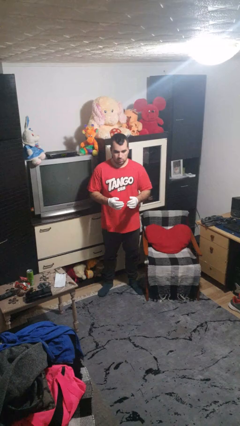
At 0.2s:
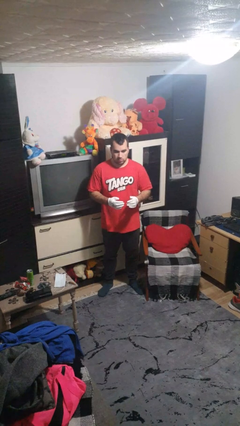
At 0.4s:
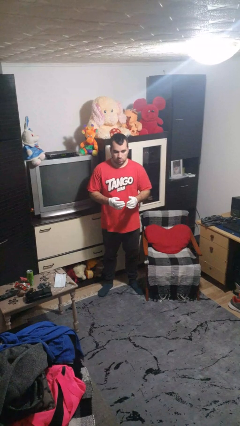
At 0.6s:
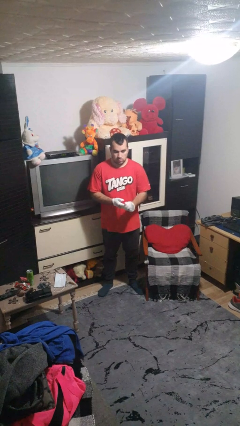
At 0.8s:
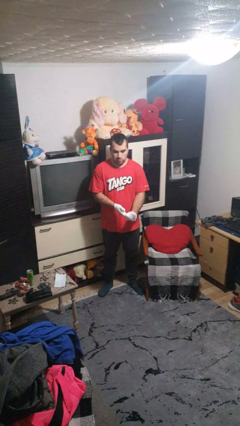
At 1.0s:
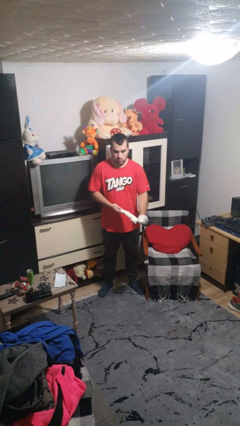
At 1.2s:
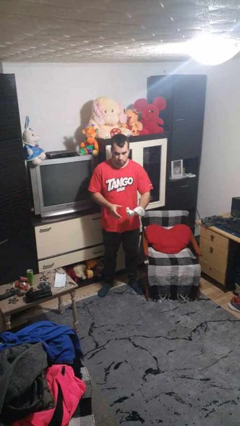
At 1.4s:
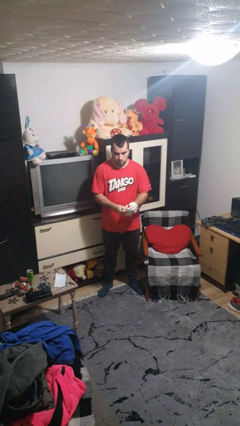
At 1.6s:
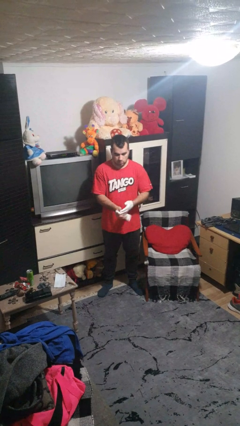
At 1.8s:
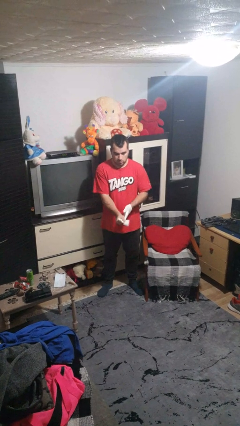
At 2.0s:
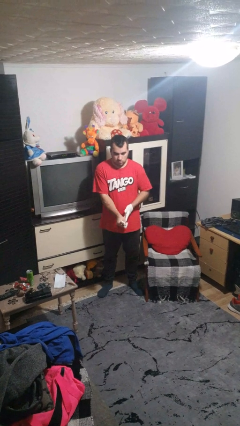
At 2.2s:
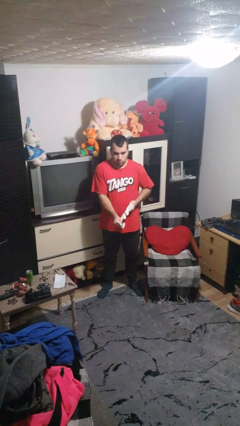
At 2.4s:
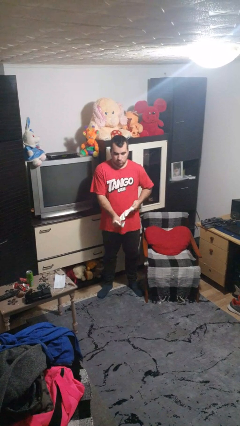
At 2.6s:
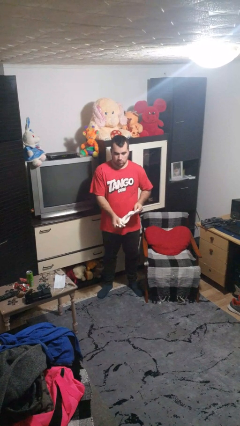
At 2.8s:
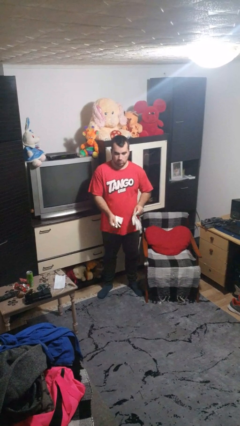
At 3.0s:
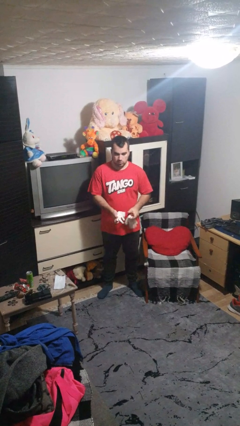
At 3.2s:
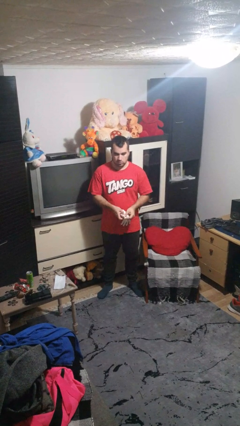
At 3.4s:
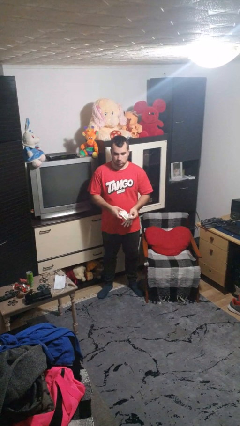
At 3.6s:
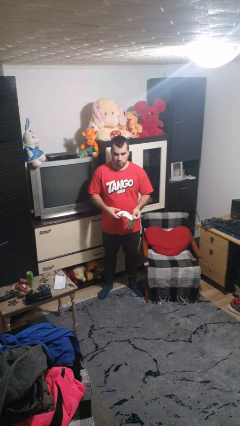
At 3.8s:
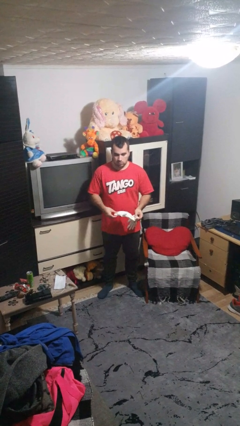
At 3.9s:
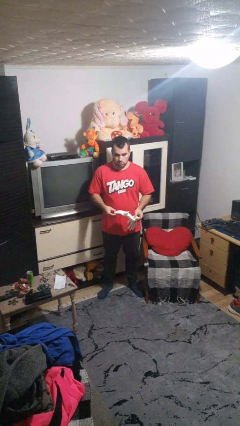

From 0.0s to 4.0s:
person takes off gloves

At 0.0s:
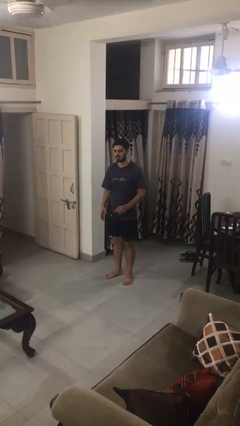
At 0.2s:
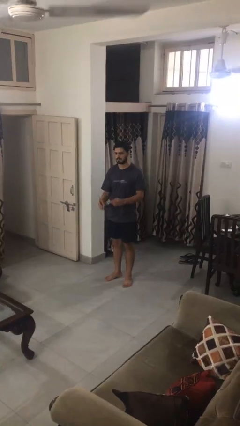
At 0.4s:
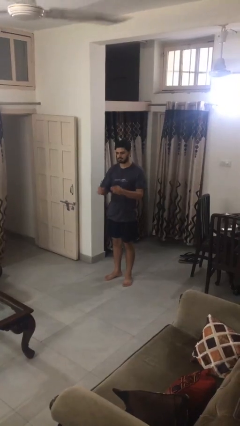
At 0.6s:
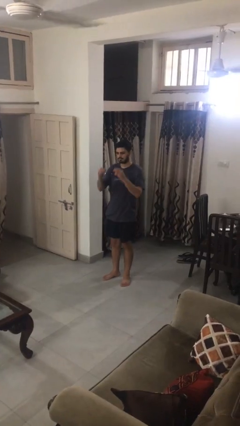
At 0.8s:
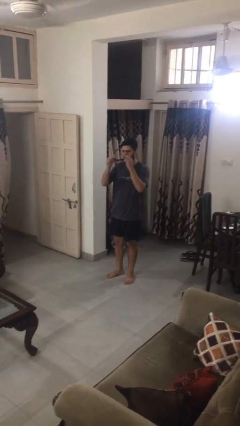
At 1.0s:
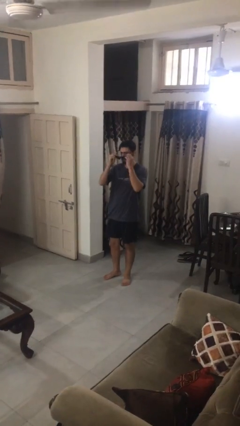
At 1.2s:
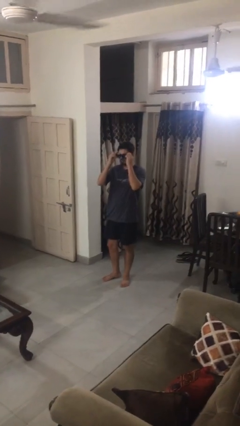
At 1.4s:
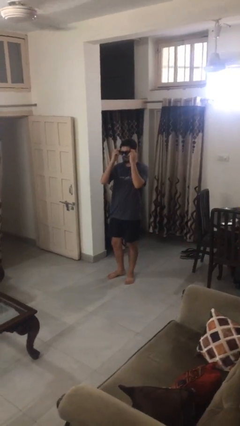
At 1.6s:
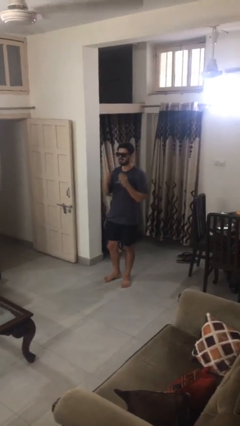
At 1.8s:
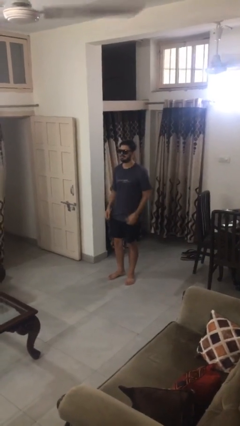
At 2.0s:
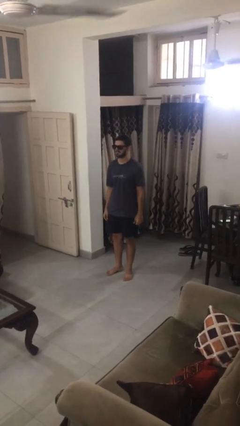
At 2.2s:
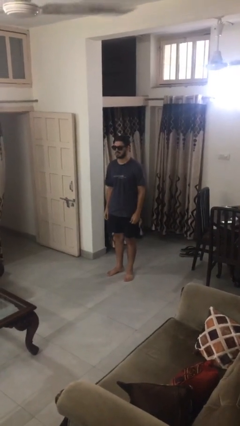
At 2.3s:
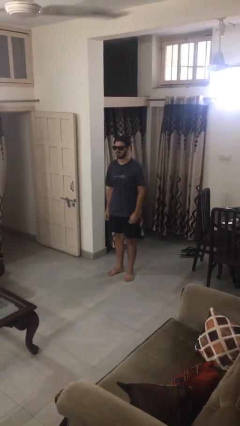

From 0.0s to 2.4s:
person puts on sunglasses

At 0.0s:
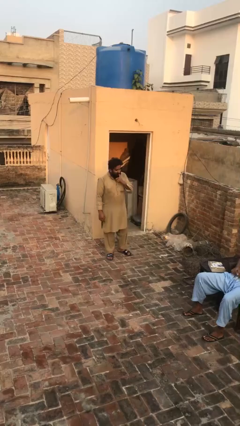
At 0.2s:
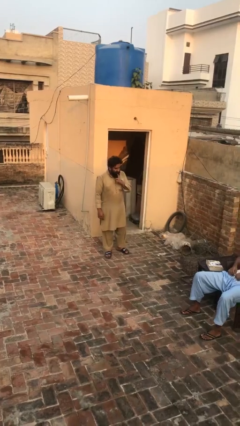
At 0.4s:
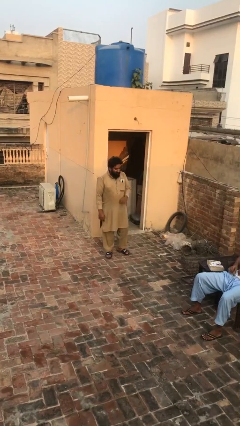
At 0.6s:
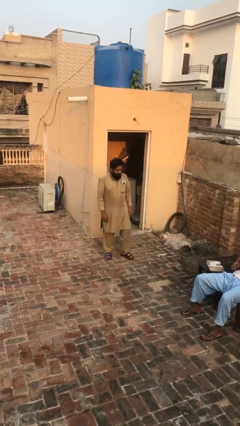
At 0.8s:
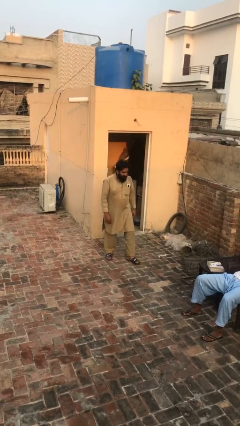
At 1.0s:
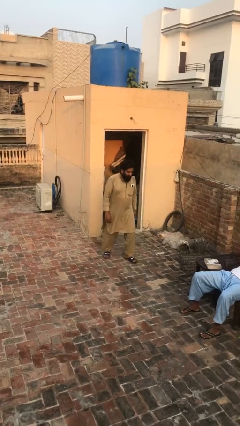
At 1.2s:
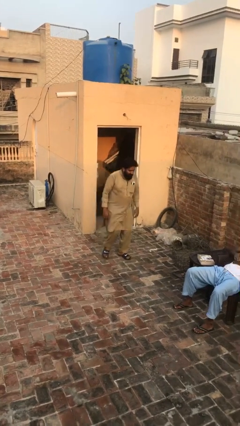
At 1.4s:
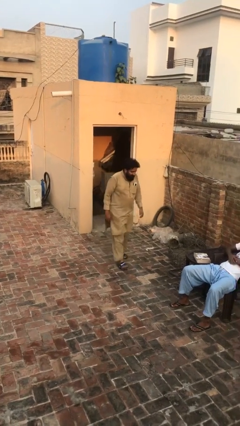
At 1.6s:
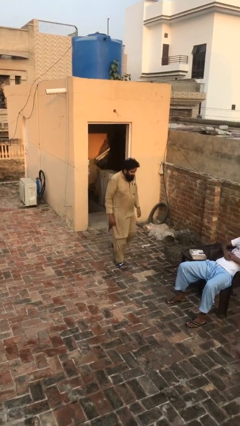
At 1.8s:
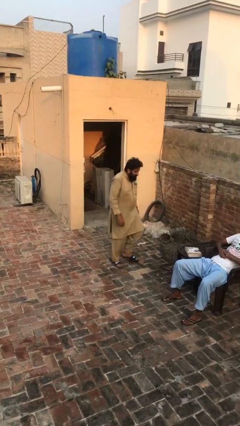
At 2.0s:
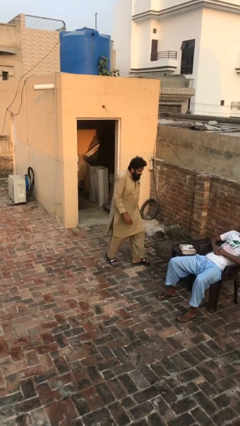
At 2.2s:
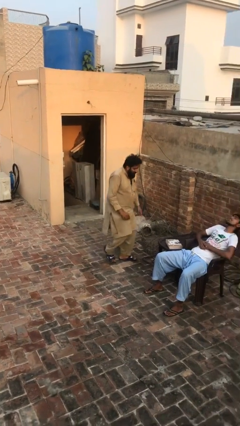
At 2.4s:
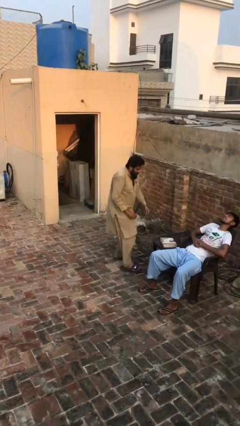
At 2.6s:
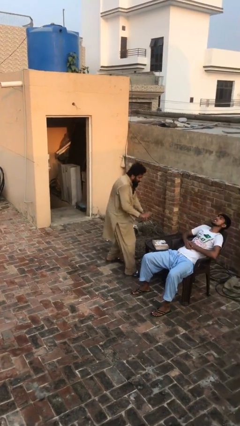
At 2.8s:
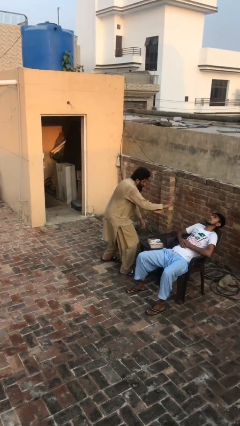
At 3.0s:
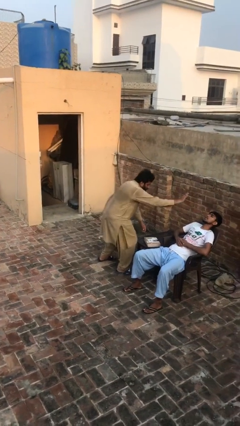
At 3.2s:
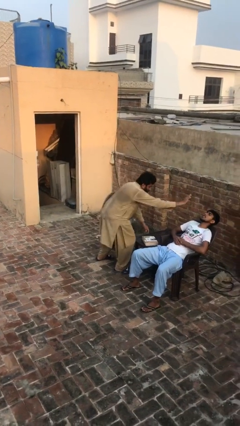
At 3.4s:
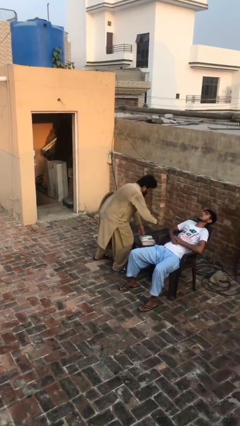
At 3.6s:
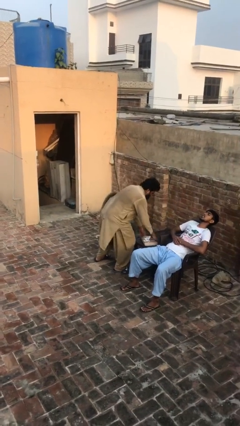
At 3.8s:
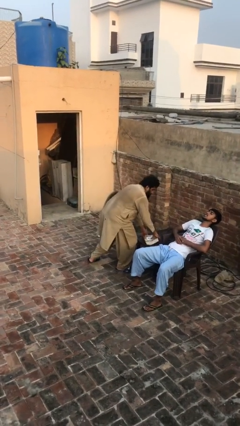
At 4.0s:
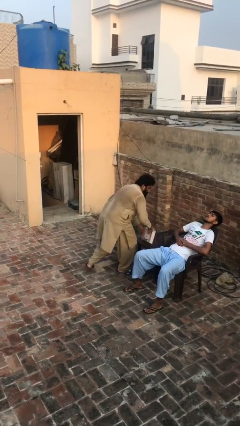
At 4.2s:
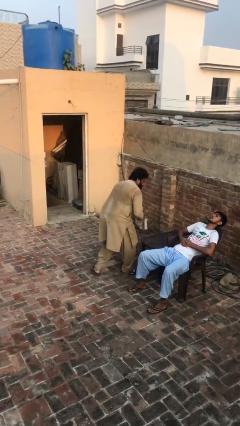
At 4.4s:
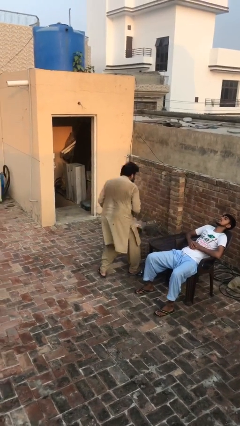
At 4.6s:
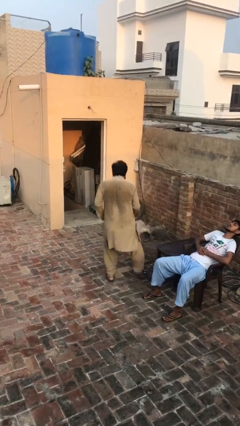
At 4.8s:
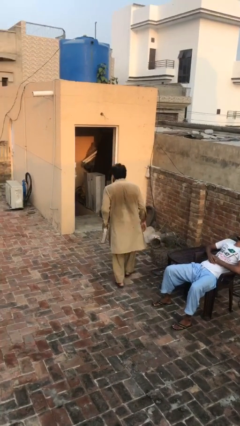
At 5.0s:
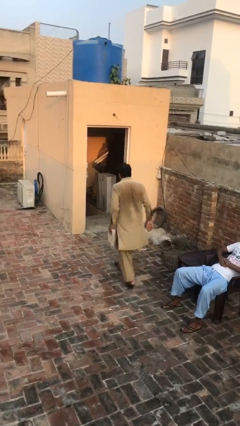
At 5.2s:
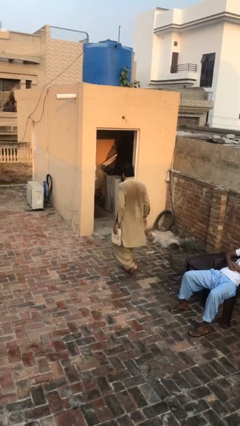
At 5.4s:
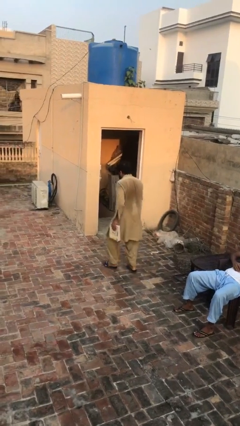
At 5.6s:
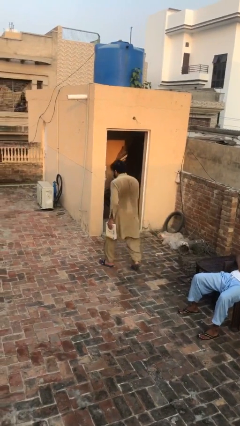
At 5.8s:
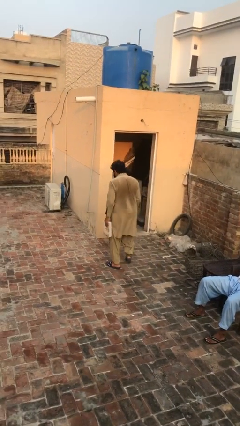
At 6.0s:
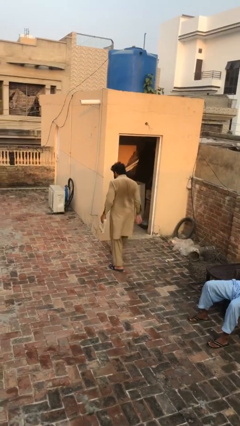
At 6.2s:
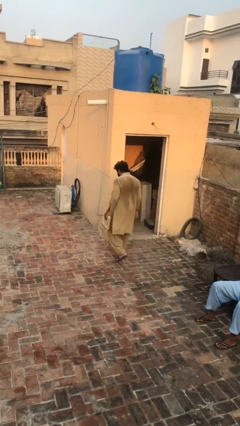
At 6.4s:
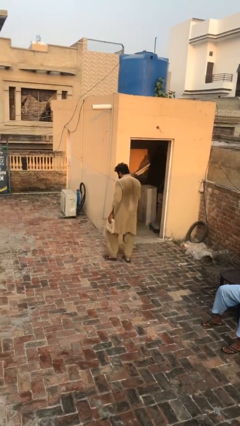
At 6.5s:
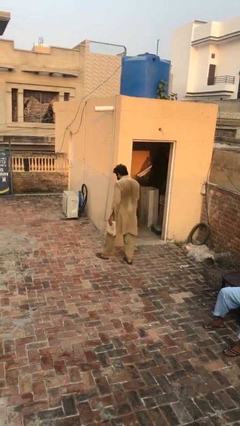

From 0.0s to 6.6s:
person steals object from person

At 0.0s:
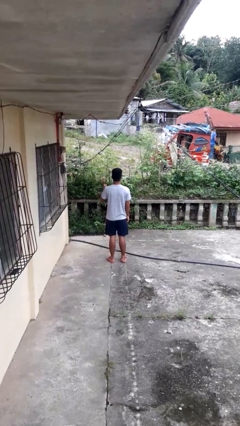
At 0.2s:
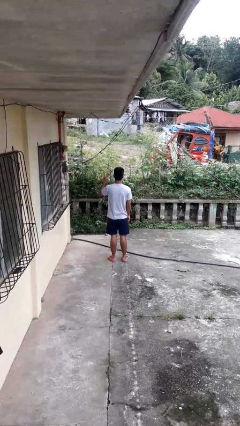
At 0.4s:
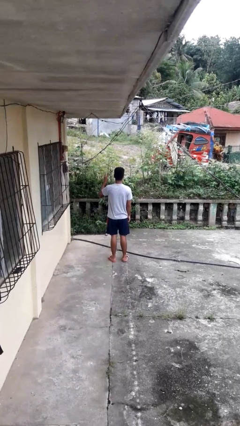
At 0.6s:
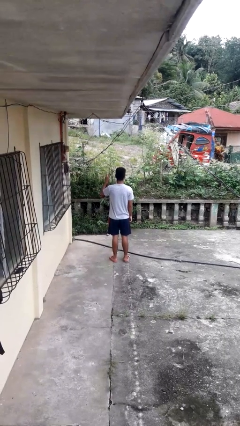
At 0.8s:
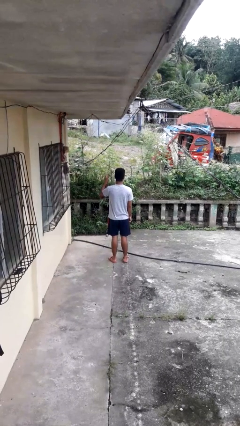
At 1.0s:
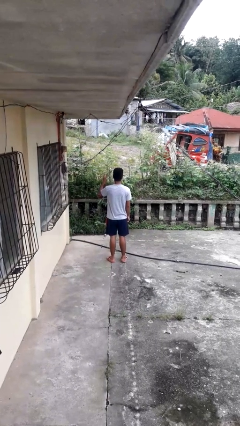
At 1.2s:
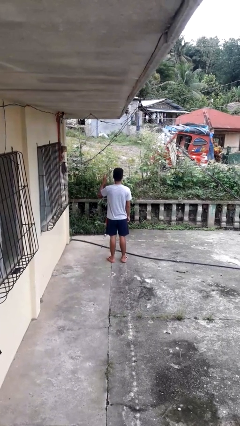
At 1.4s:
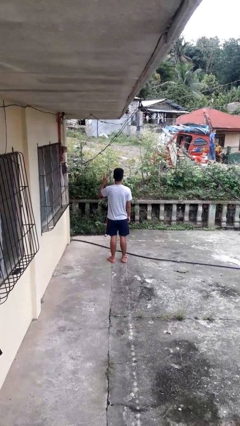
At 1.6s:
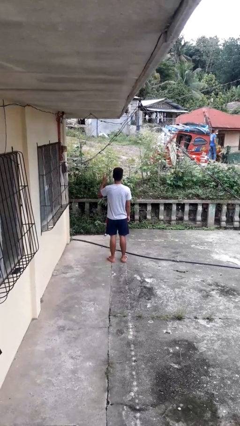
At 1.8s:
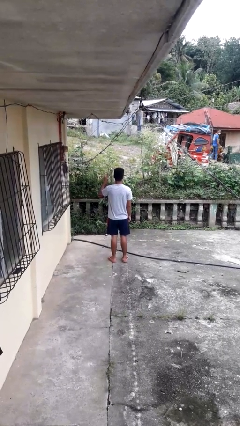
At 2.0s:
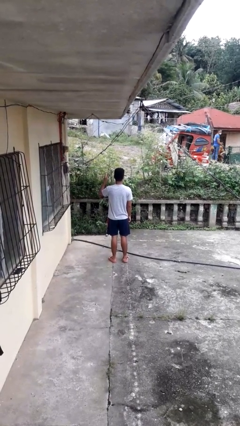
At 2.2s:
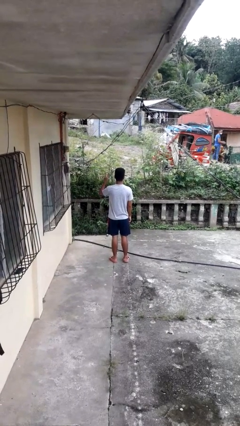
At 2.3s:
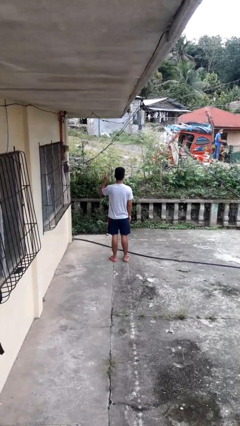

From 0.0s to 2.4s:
person gestures peace

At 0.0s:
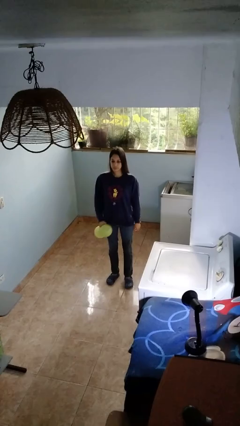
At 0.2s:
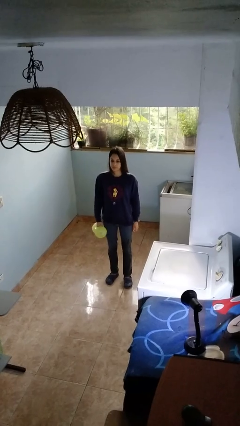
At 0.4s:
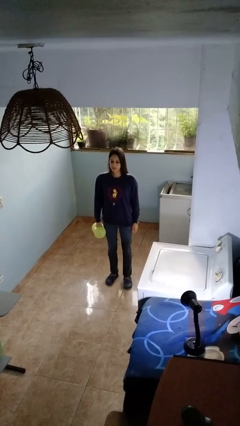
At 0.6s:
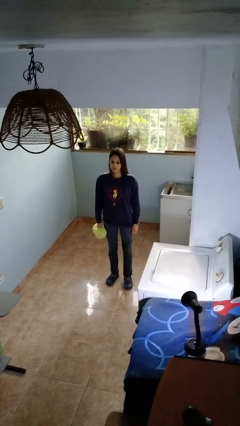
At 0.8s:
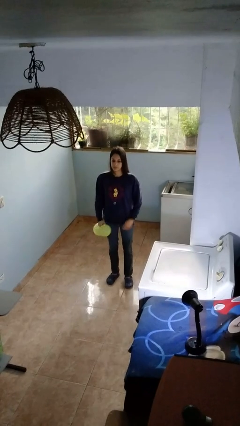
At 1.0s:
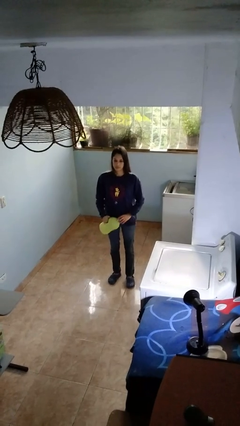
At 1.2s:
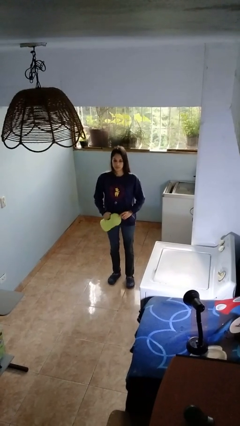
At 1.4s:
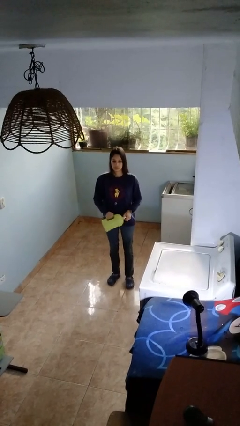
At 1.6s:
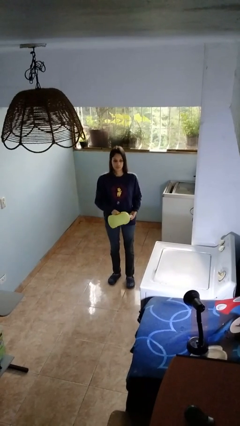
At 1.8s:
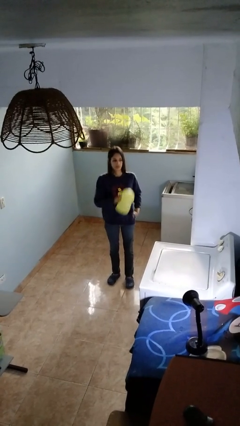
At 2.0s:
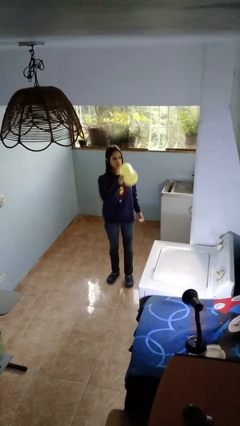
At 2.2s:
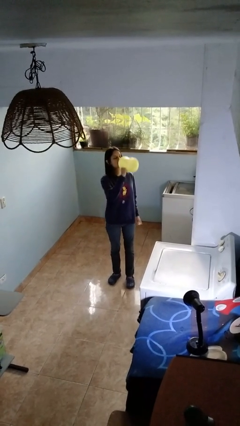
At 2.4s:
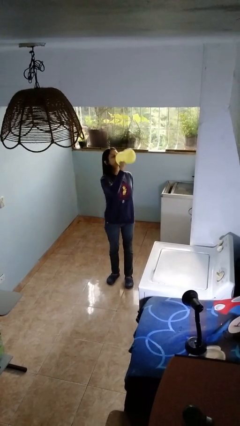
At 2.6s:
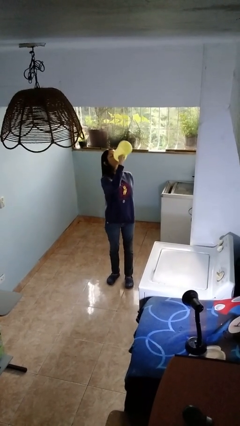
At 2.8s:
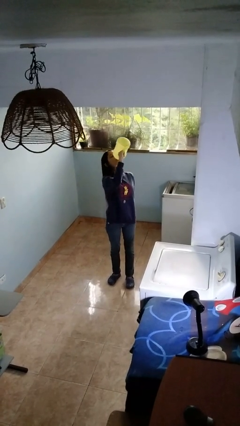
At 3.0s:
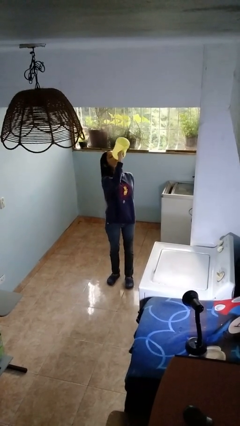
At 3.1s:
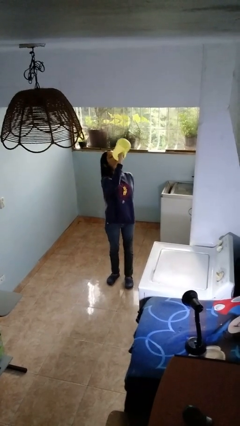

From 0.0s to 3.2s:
person drinks from bottle
